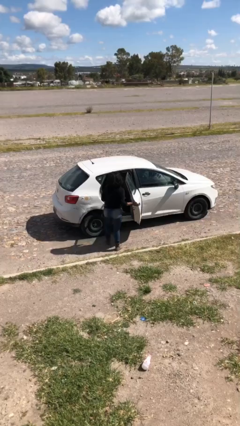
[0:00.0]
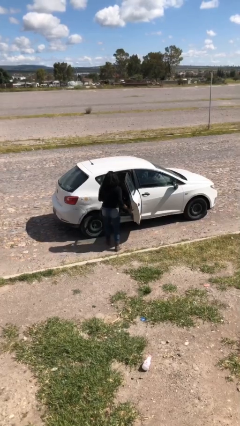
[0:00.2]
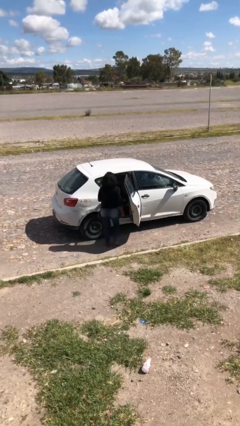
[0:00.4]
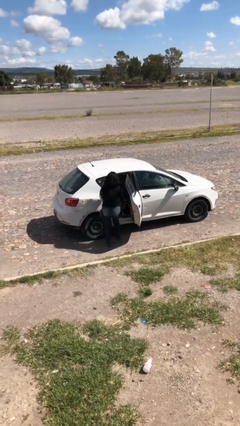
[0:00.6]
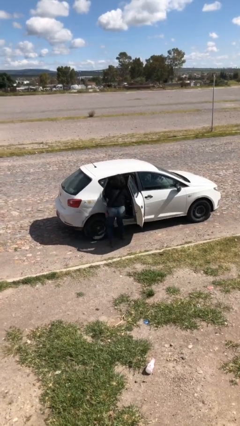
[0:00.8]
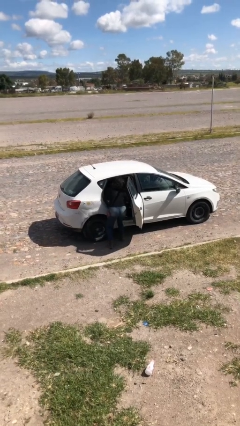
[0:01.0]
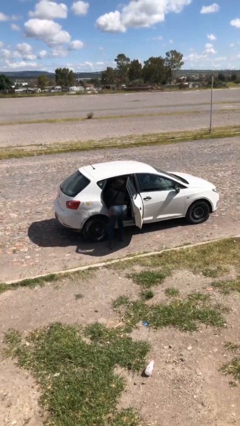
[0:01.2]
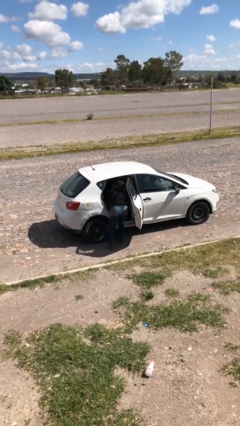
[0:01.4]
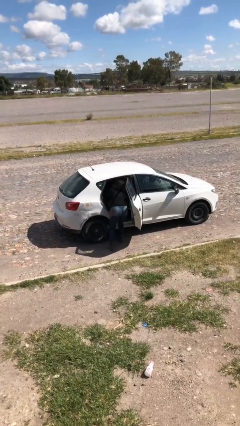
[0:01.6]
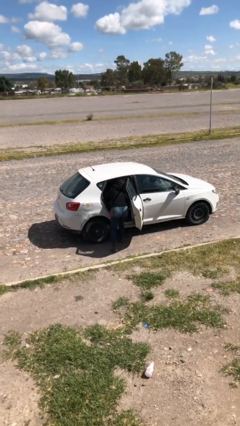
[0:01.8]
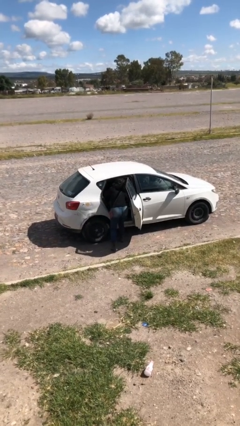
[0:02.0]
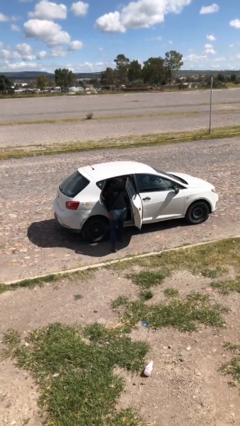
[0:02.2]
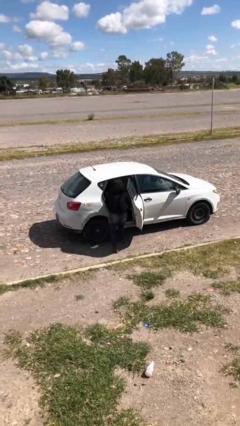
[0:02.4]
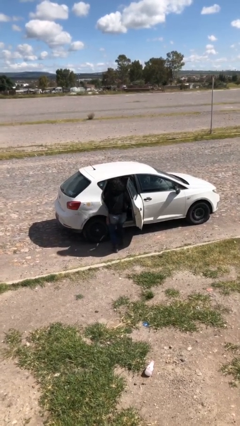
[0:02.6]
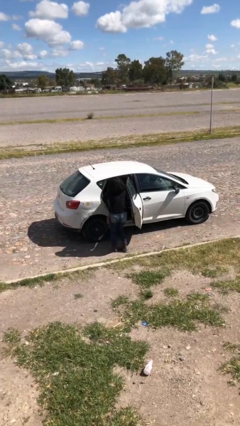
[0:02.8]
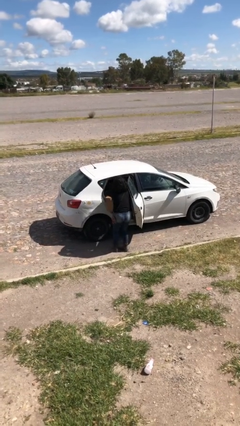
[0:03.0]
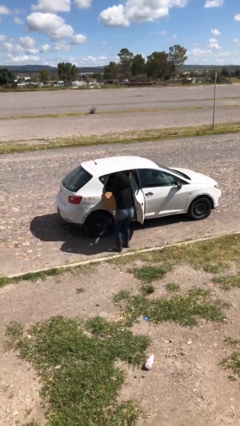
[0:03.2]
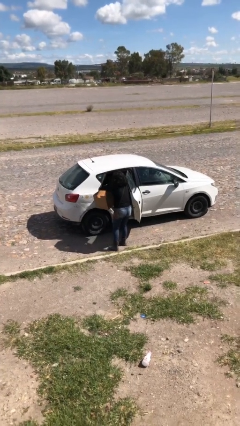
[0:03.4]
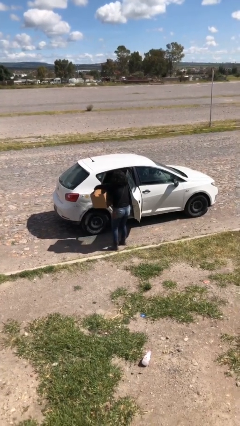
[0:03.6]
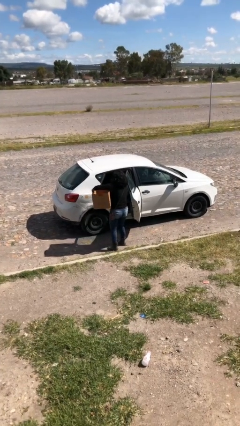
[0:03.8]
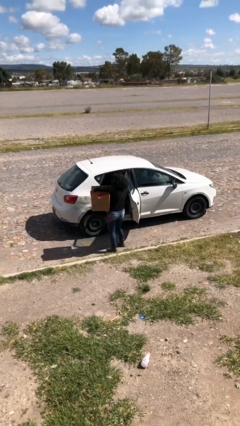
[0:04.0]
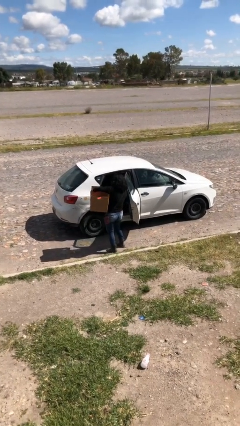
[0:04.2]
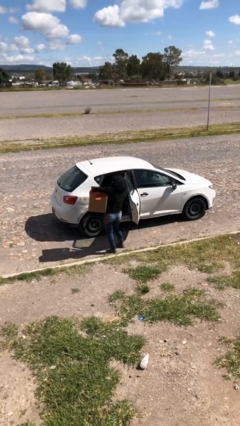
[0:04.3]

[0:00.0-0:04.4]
person unloads car

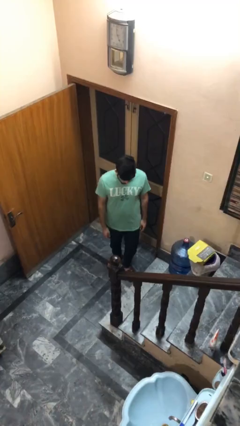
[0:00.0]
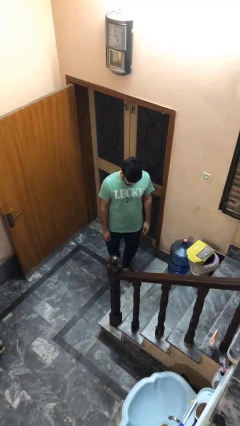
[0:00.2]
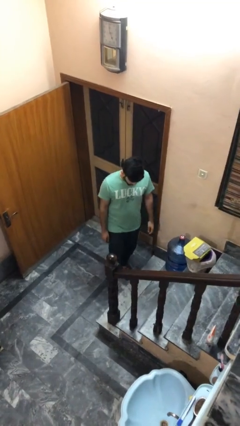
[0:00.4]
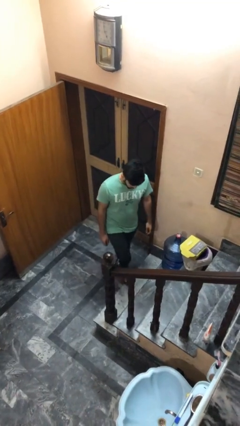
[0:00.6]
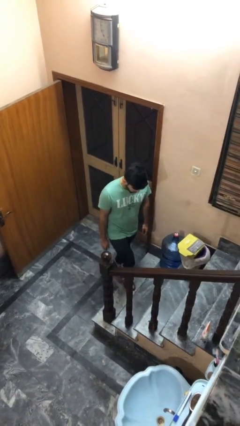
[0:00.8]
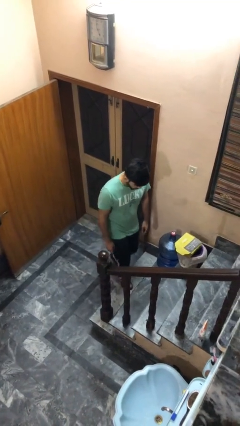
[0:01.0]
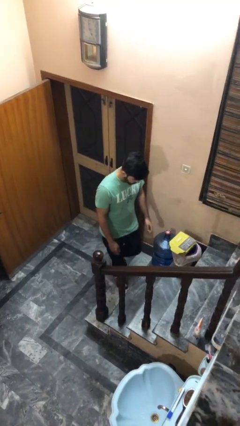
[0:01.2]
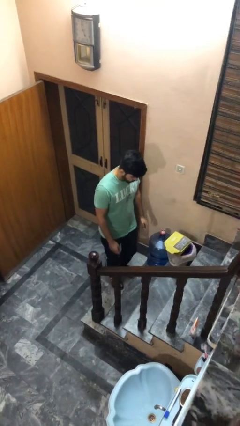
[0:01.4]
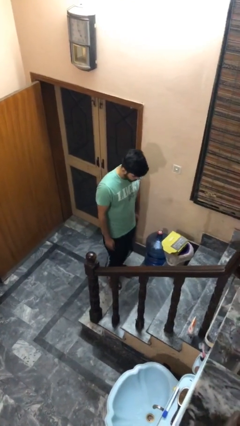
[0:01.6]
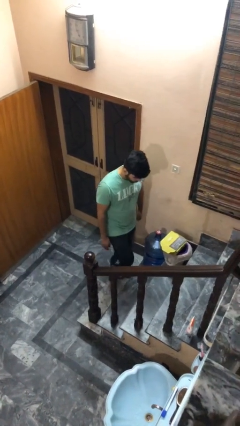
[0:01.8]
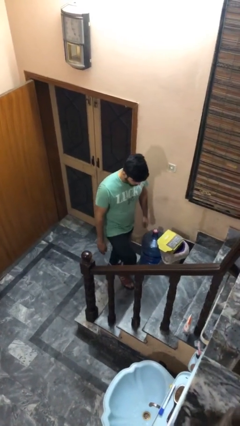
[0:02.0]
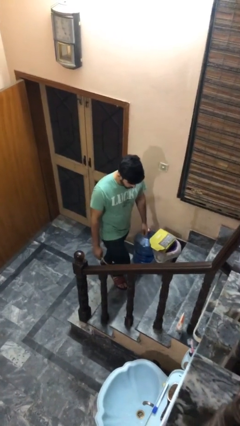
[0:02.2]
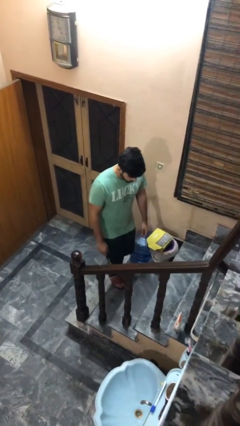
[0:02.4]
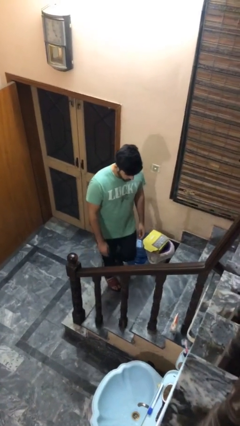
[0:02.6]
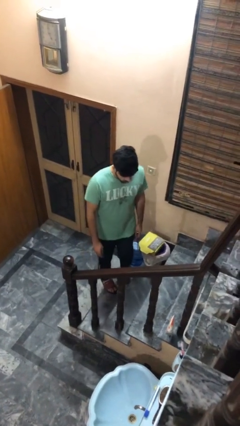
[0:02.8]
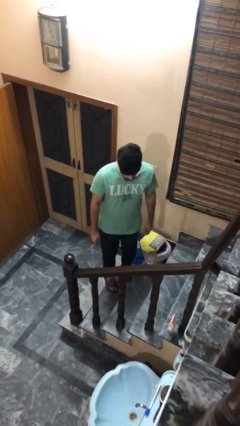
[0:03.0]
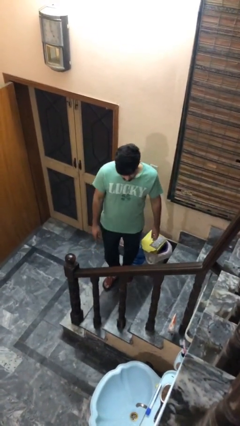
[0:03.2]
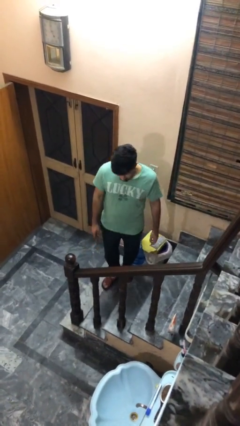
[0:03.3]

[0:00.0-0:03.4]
person climbs up stairs

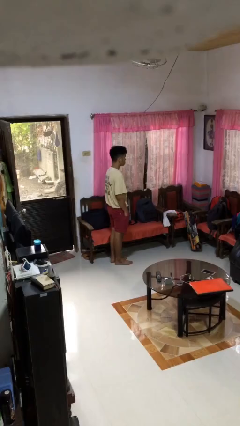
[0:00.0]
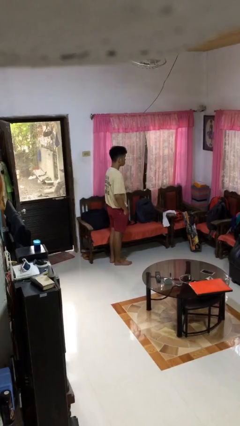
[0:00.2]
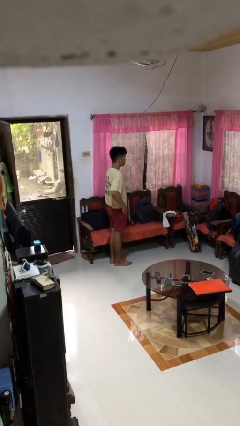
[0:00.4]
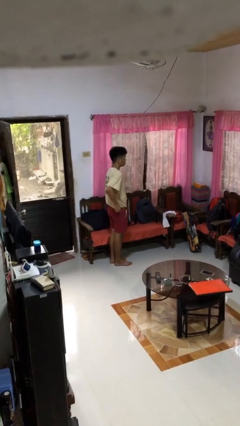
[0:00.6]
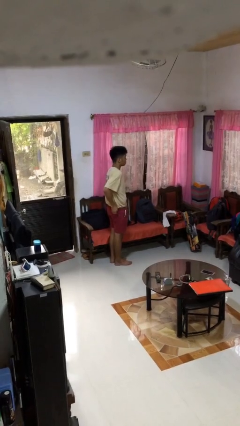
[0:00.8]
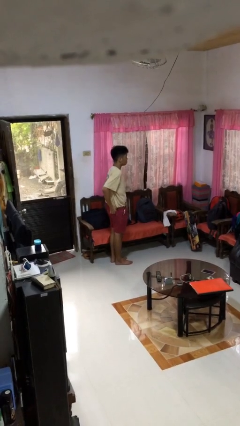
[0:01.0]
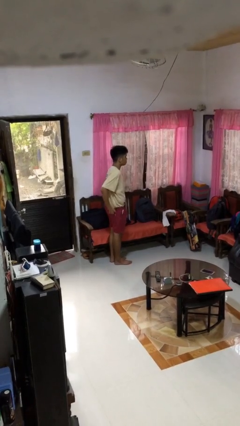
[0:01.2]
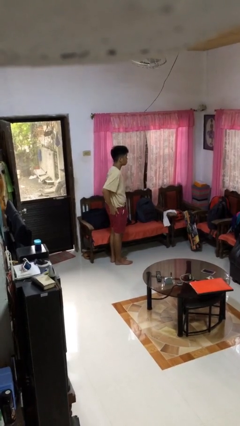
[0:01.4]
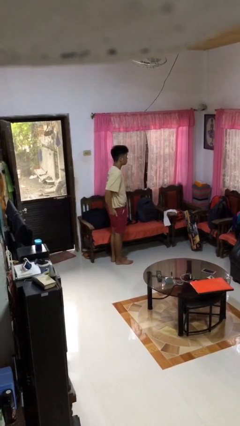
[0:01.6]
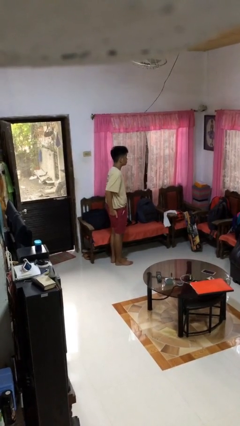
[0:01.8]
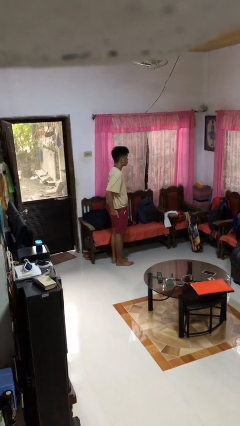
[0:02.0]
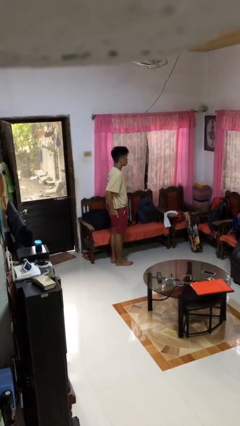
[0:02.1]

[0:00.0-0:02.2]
person puts hands in back pockets

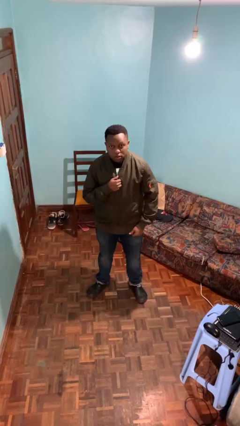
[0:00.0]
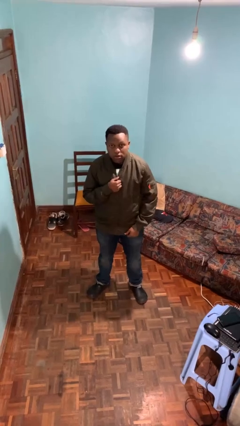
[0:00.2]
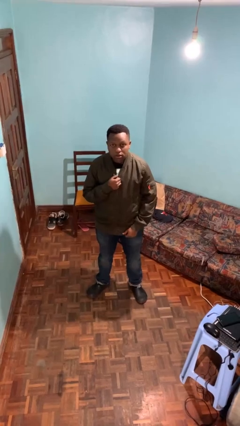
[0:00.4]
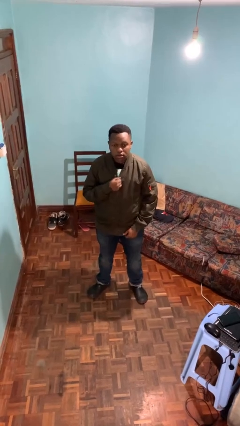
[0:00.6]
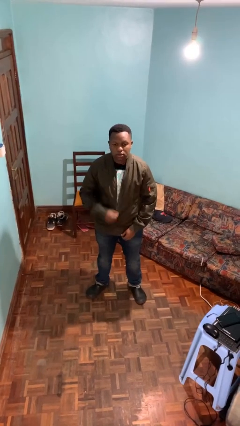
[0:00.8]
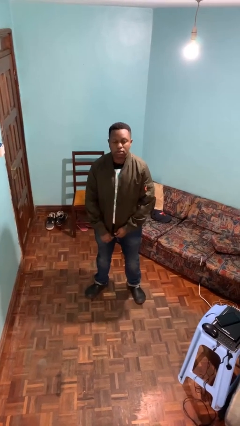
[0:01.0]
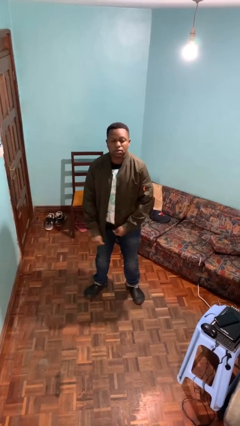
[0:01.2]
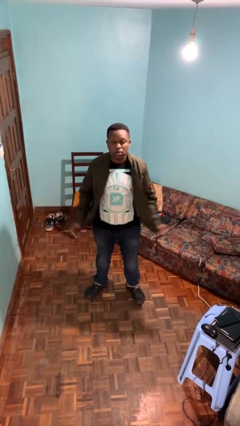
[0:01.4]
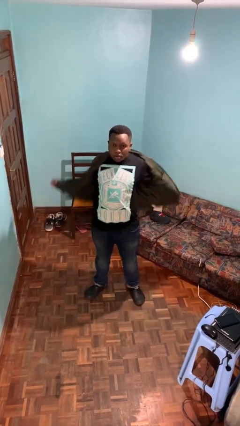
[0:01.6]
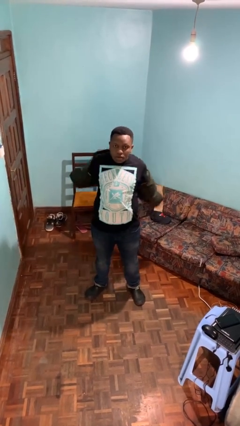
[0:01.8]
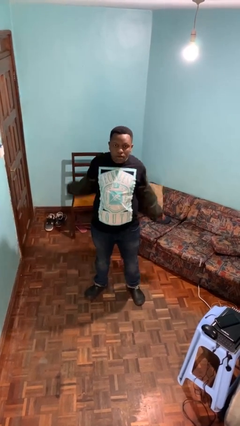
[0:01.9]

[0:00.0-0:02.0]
person unzips jacket

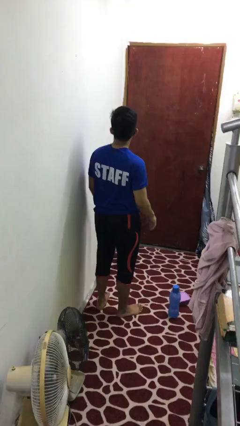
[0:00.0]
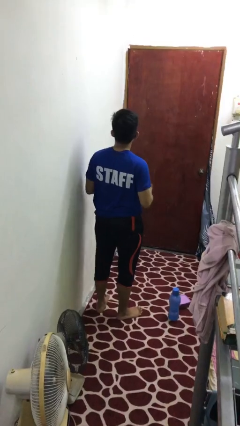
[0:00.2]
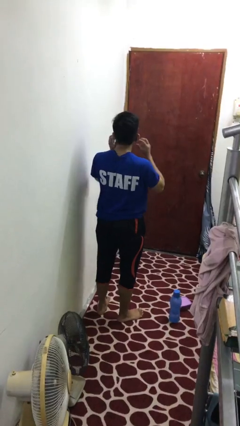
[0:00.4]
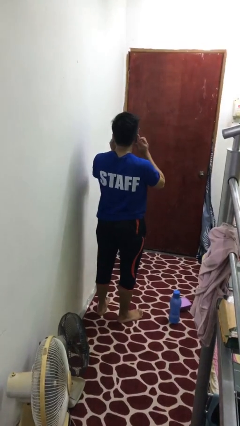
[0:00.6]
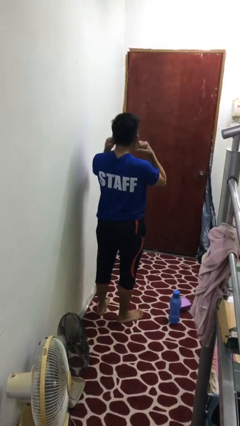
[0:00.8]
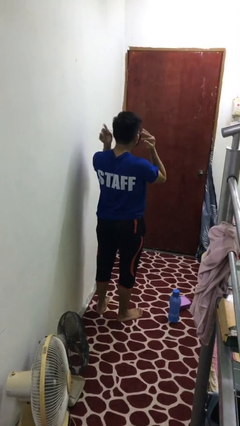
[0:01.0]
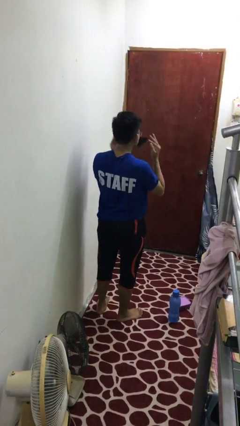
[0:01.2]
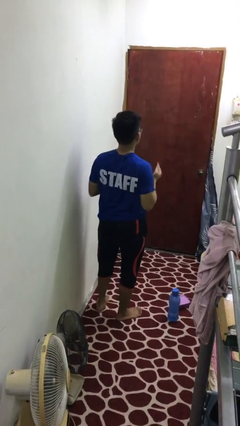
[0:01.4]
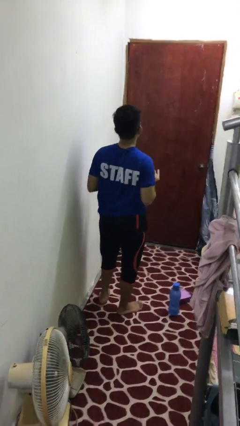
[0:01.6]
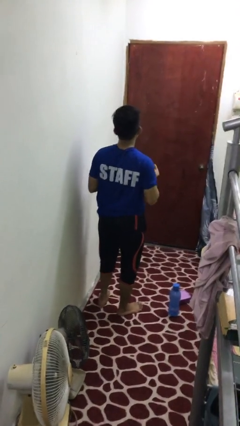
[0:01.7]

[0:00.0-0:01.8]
person takes off facemask

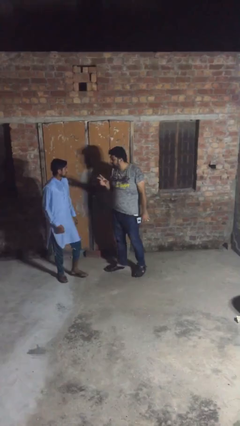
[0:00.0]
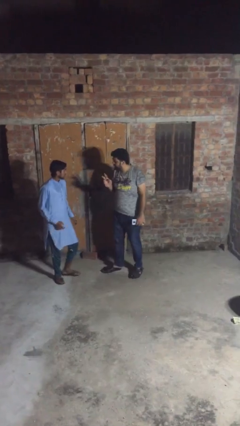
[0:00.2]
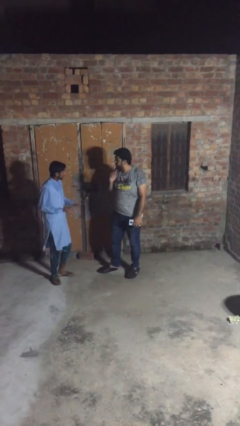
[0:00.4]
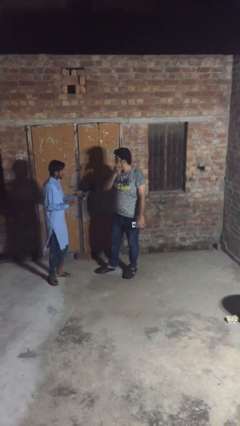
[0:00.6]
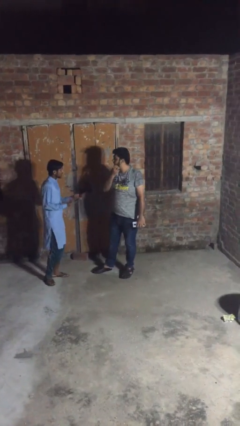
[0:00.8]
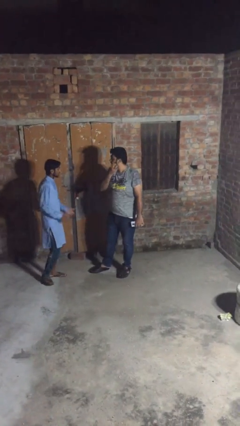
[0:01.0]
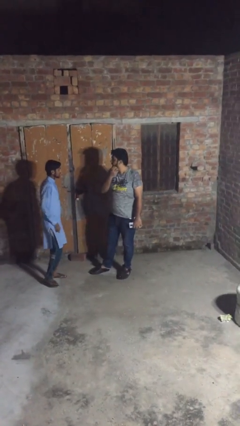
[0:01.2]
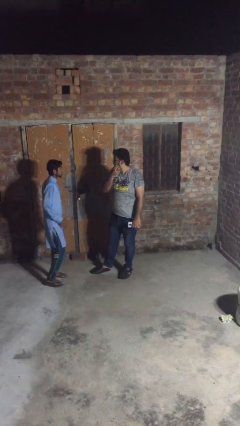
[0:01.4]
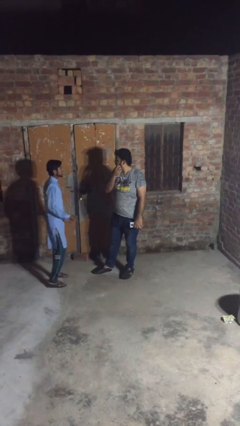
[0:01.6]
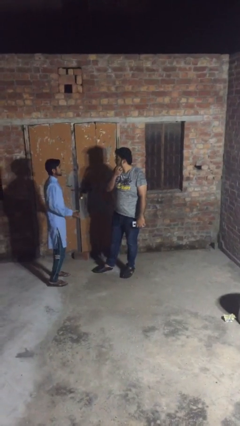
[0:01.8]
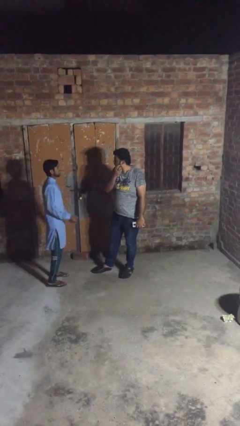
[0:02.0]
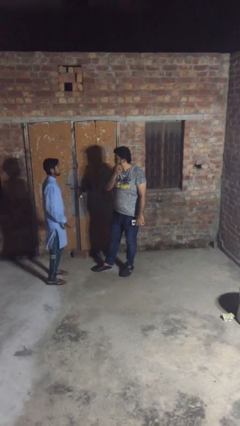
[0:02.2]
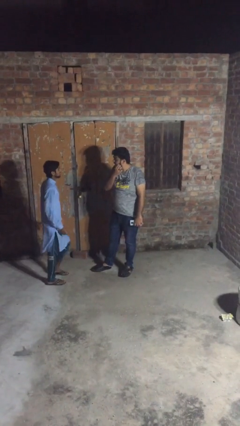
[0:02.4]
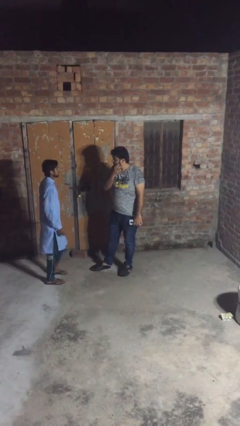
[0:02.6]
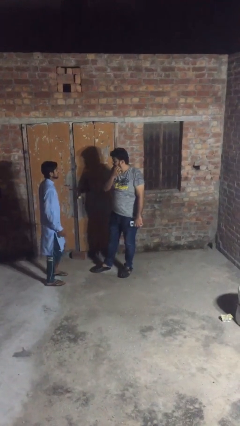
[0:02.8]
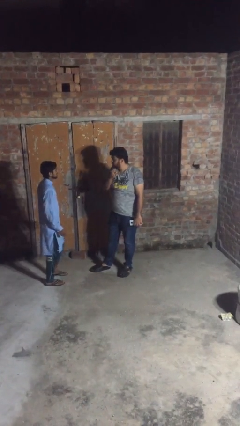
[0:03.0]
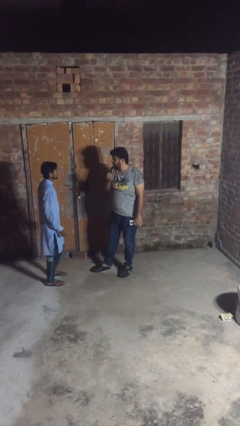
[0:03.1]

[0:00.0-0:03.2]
person talks to person

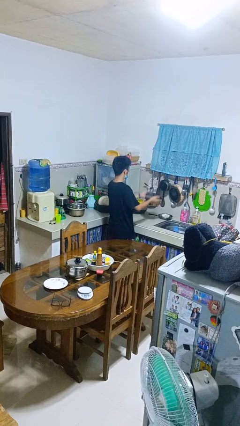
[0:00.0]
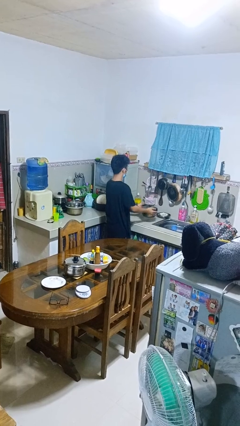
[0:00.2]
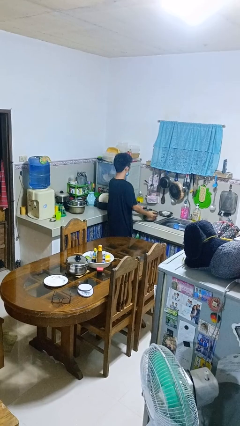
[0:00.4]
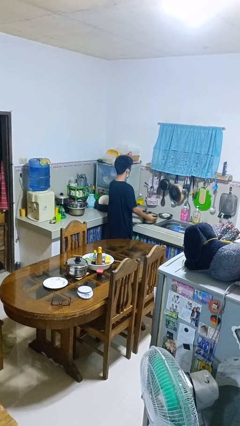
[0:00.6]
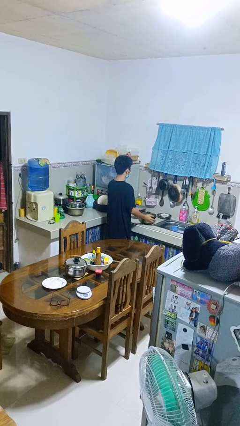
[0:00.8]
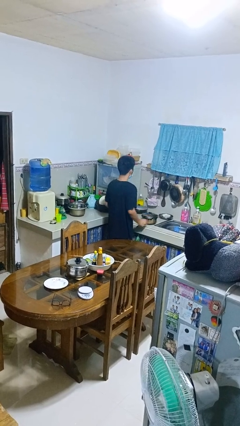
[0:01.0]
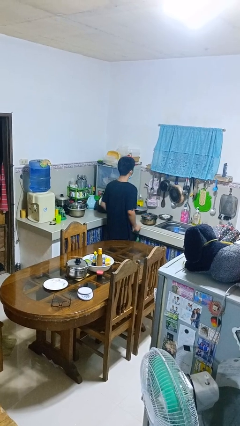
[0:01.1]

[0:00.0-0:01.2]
person puts down object on countertop
